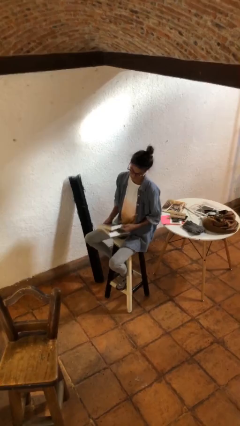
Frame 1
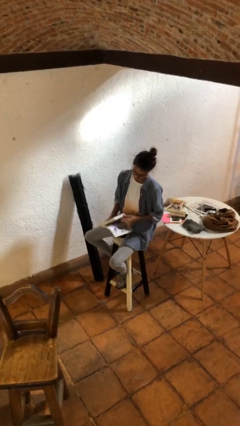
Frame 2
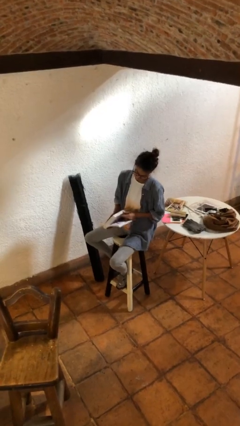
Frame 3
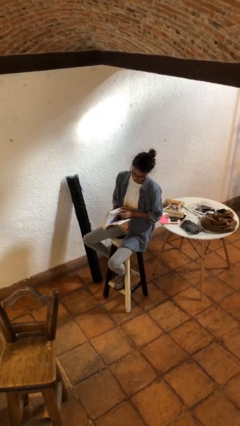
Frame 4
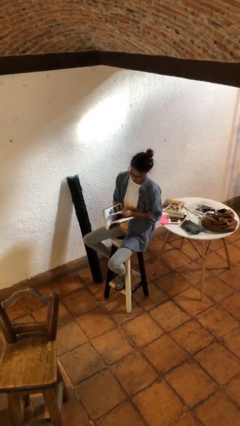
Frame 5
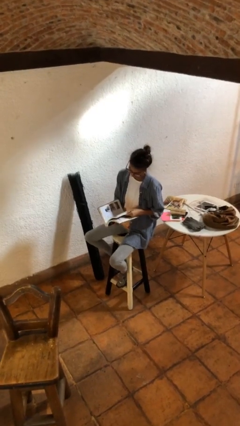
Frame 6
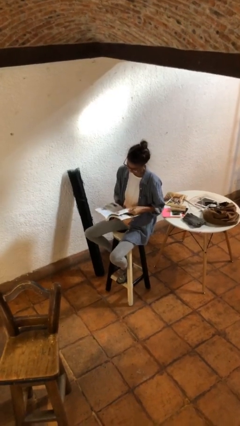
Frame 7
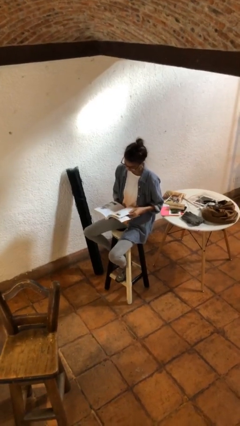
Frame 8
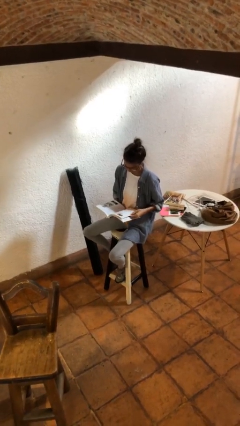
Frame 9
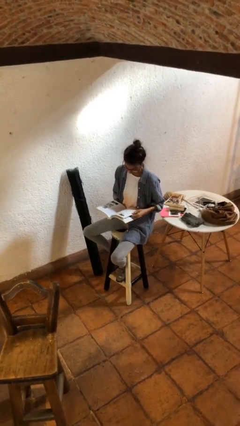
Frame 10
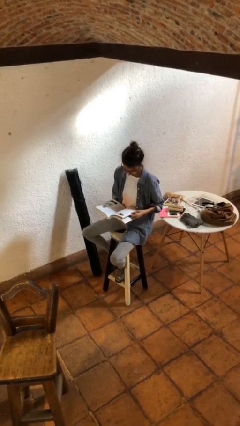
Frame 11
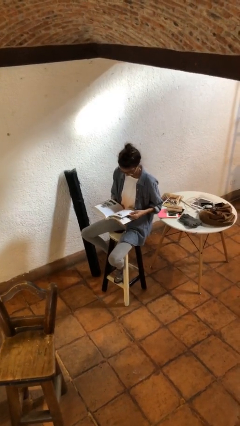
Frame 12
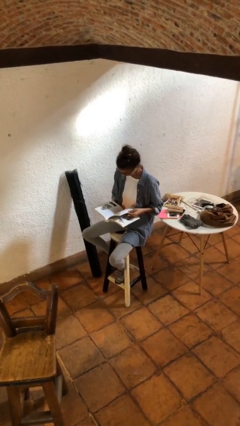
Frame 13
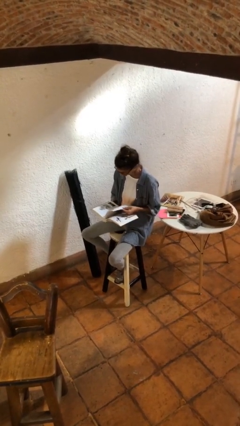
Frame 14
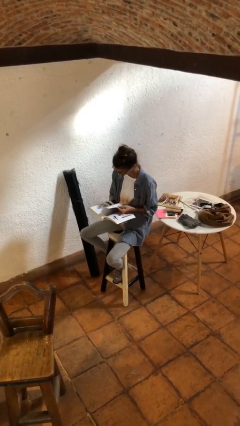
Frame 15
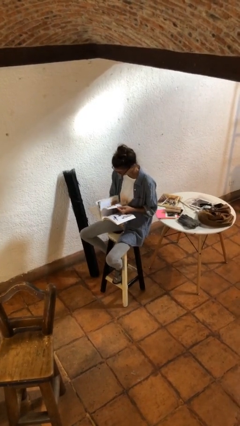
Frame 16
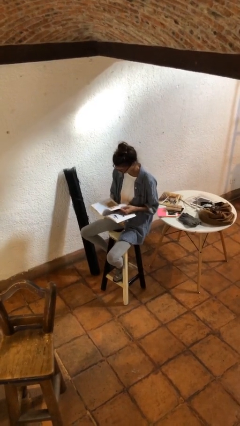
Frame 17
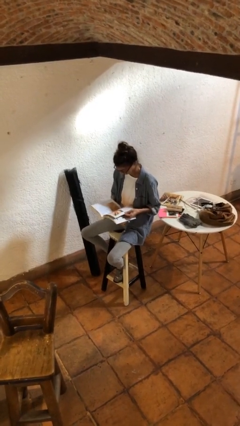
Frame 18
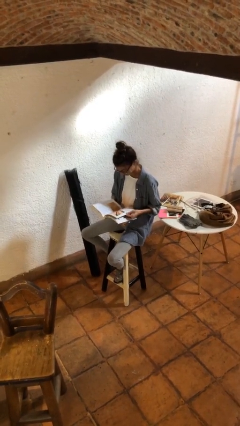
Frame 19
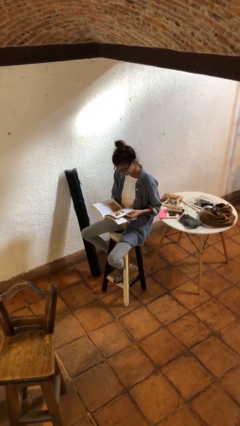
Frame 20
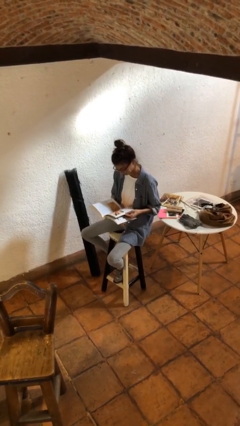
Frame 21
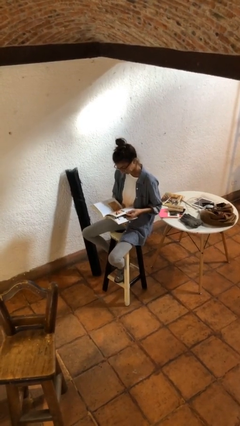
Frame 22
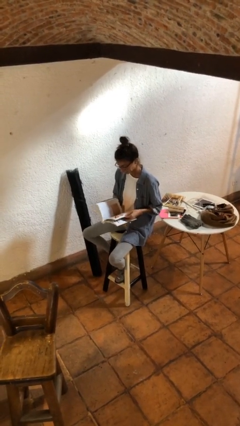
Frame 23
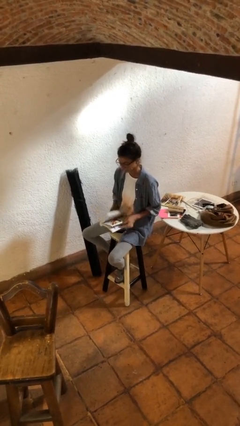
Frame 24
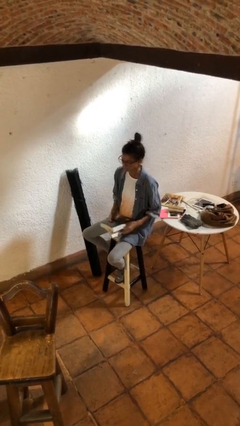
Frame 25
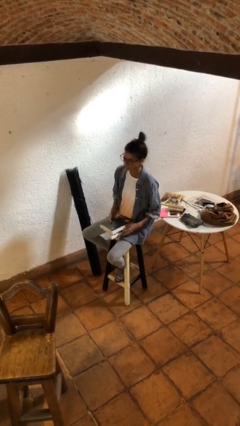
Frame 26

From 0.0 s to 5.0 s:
person reads book

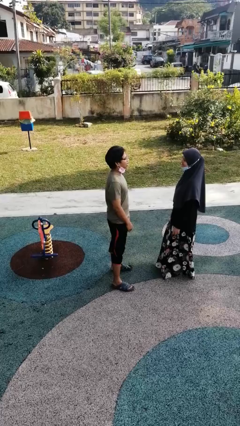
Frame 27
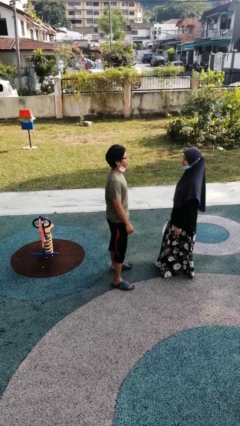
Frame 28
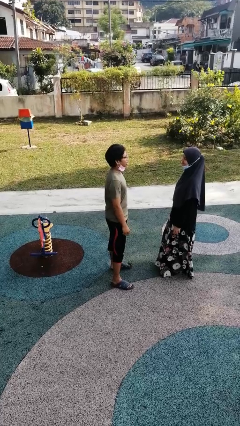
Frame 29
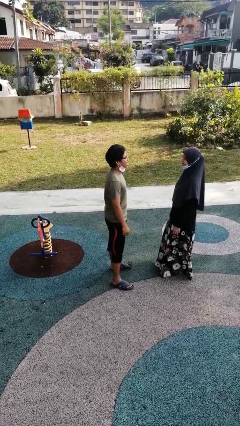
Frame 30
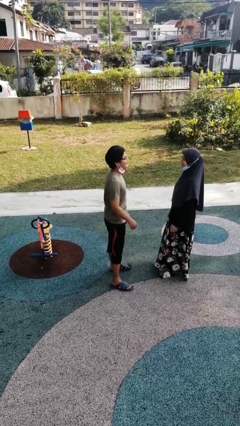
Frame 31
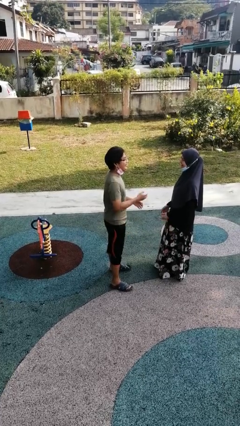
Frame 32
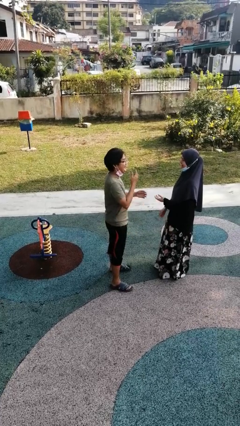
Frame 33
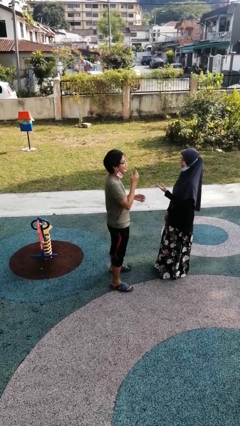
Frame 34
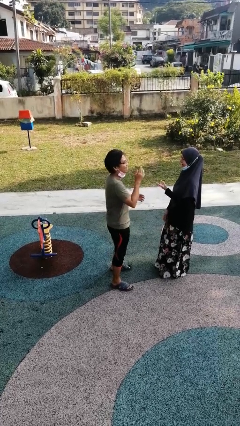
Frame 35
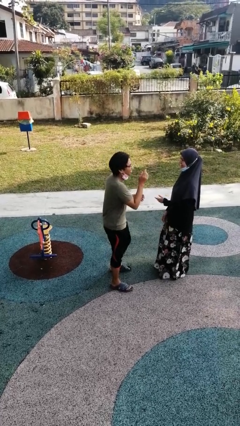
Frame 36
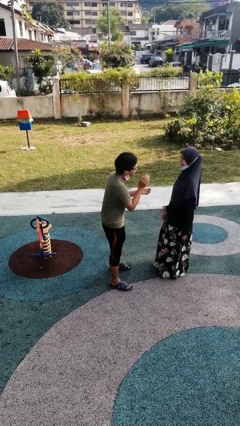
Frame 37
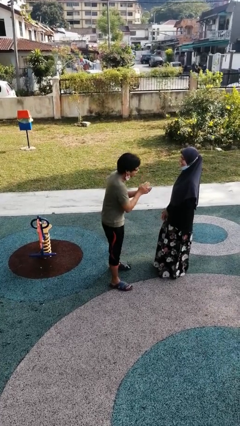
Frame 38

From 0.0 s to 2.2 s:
person laughs with person

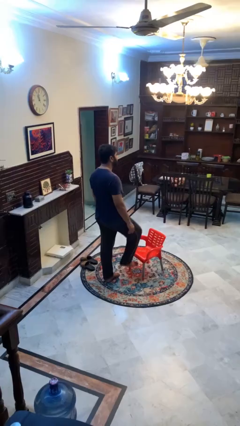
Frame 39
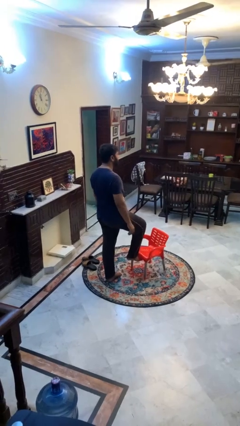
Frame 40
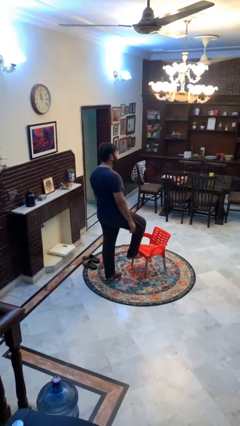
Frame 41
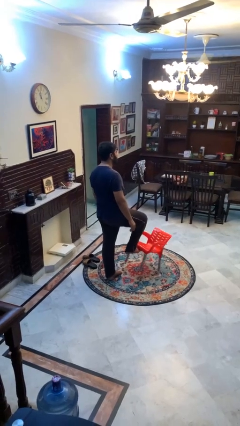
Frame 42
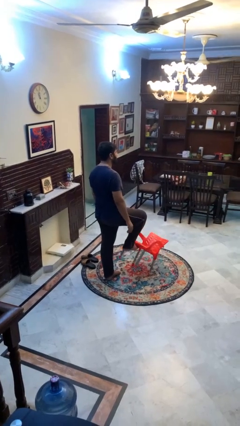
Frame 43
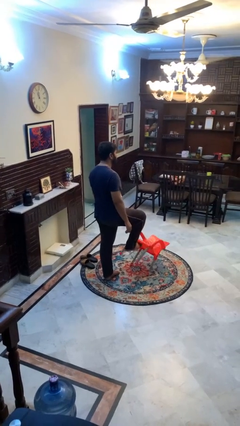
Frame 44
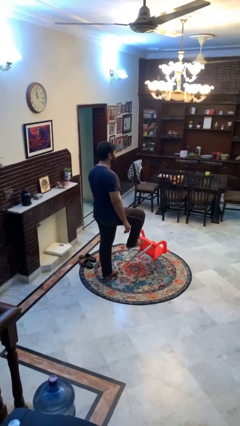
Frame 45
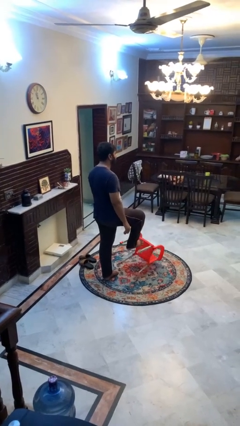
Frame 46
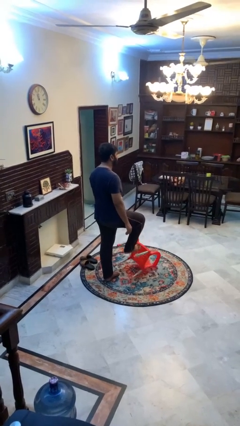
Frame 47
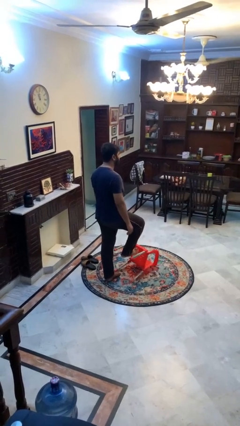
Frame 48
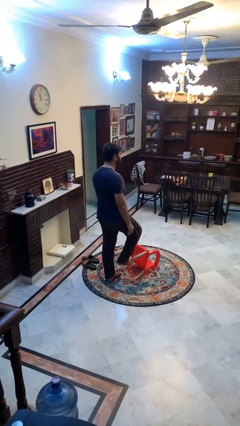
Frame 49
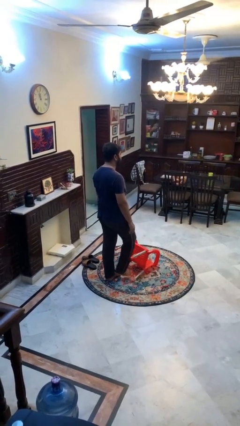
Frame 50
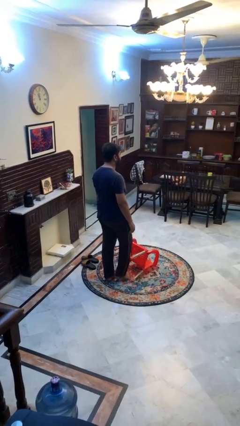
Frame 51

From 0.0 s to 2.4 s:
person knocks over furniture

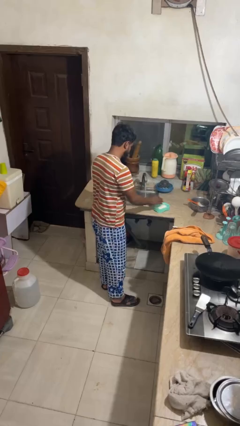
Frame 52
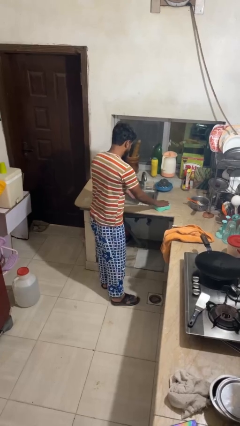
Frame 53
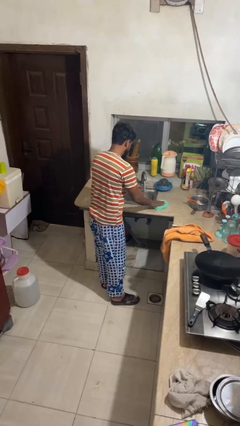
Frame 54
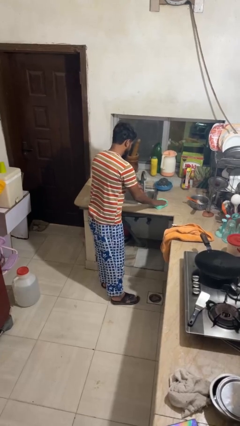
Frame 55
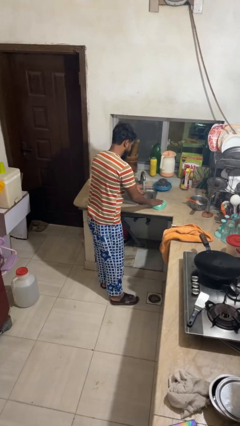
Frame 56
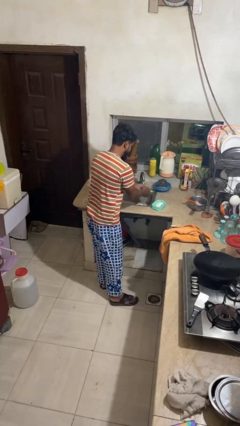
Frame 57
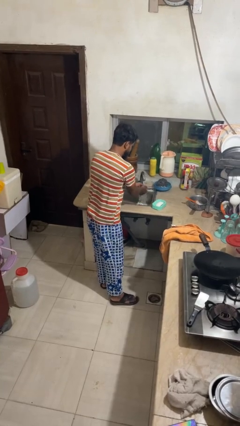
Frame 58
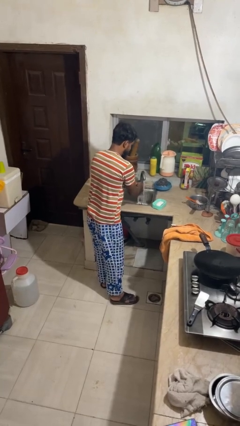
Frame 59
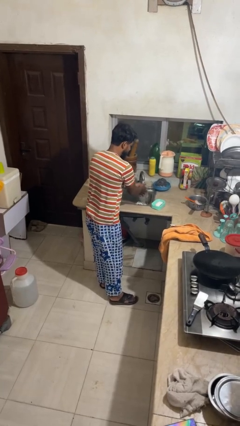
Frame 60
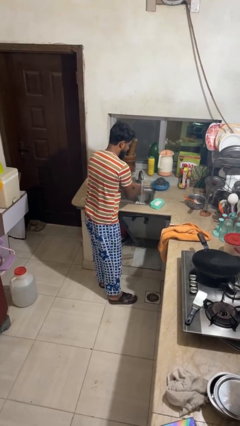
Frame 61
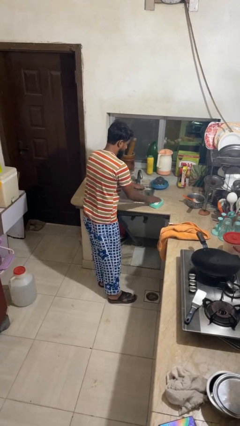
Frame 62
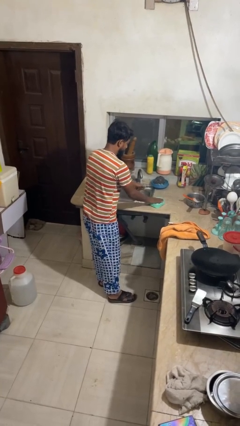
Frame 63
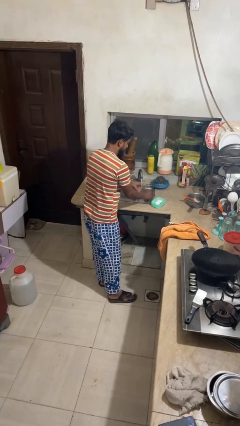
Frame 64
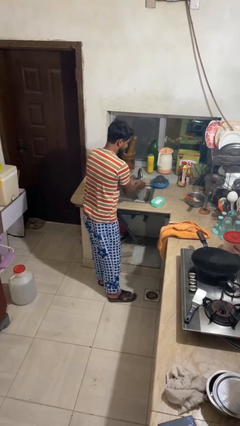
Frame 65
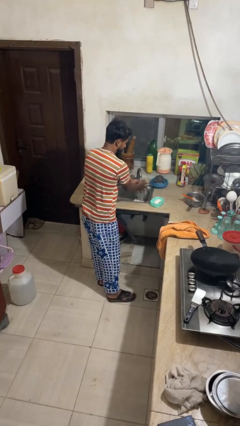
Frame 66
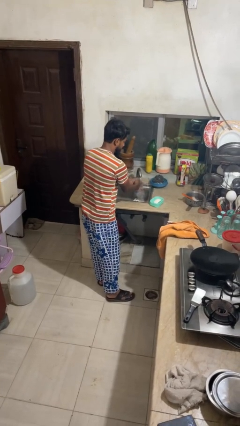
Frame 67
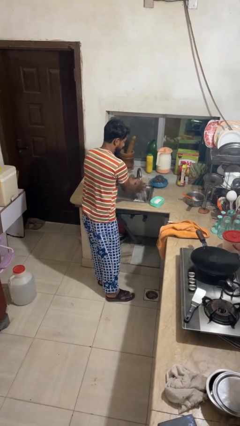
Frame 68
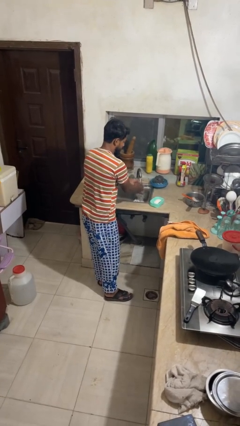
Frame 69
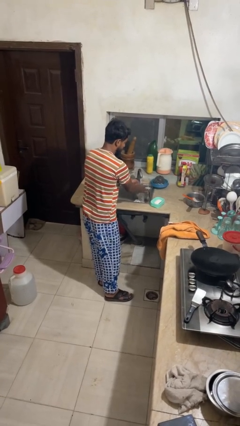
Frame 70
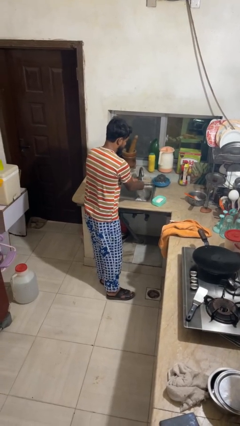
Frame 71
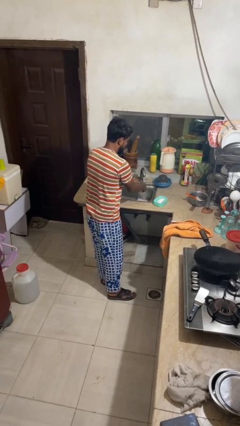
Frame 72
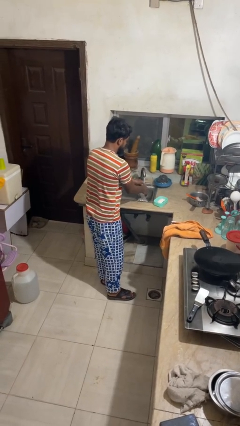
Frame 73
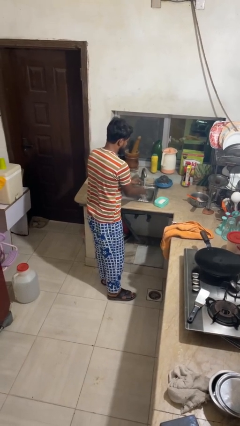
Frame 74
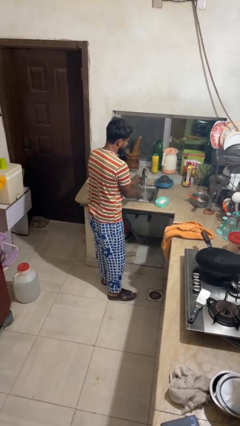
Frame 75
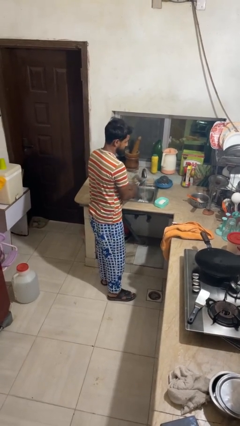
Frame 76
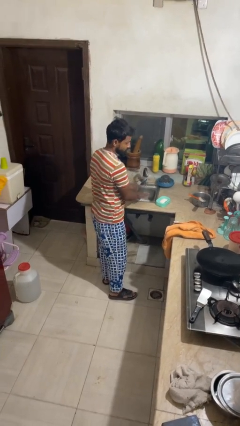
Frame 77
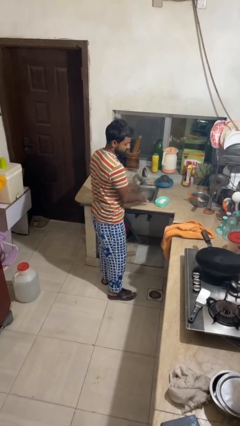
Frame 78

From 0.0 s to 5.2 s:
person washes hands

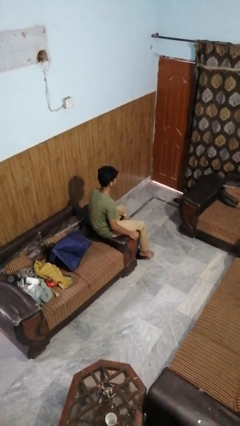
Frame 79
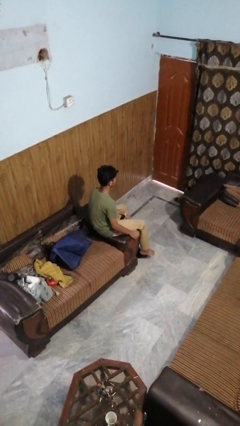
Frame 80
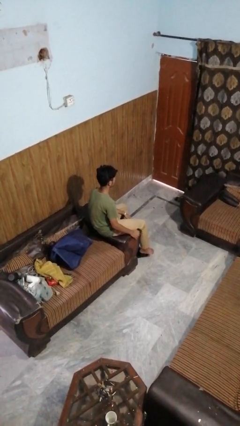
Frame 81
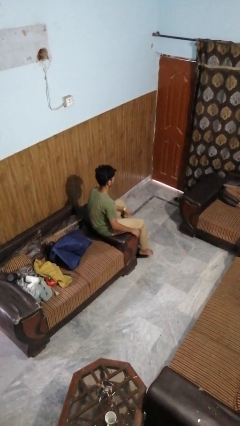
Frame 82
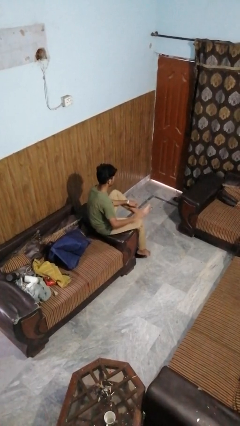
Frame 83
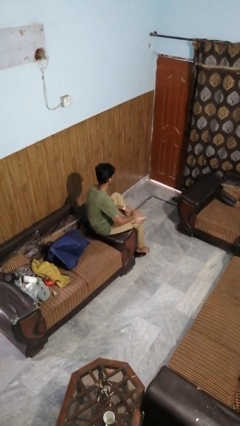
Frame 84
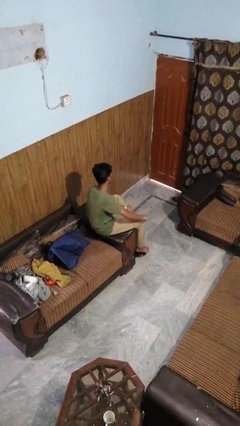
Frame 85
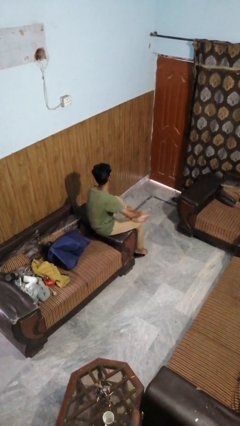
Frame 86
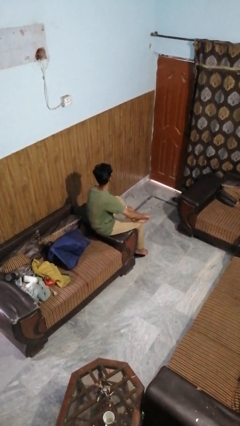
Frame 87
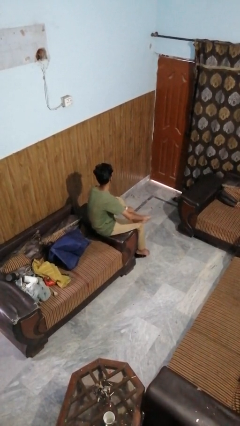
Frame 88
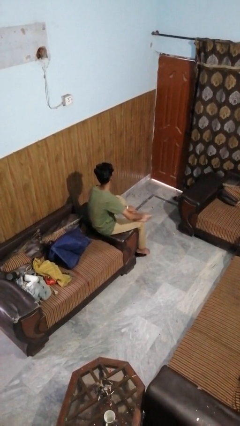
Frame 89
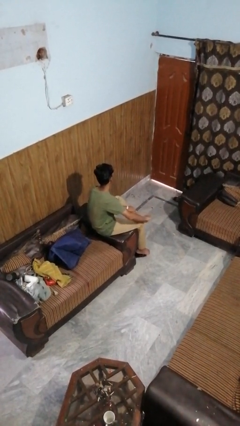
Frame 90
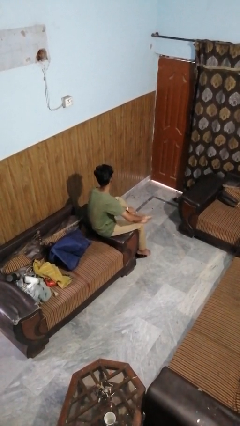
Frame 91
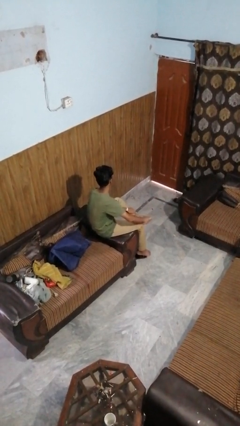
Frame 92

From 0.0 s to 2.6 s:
person rubs foot
